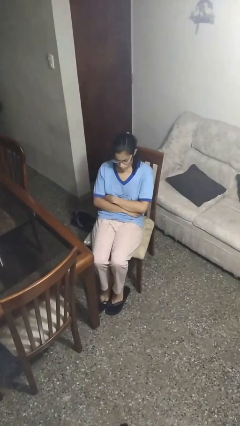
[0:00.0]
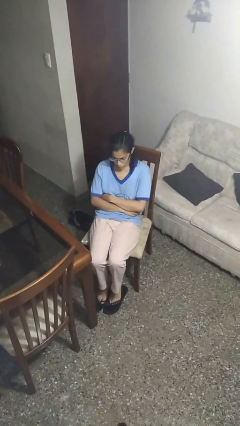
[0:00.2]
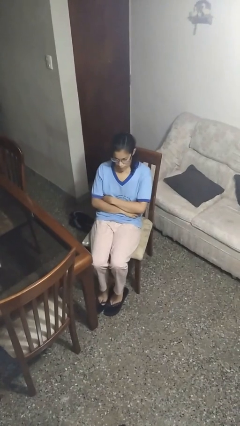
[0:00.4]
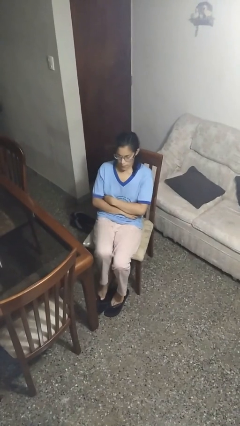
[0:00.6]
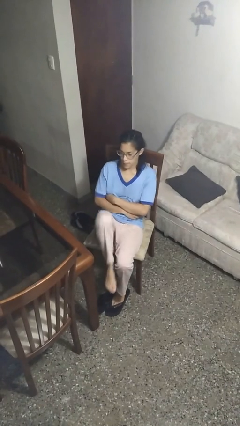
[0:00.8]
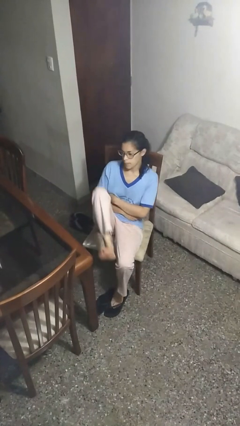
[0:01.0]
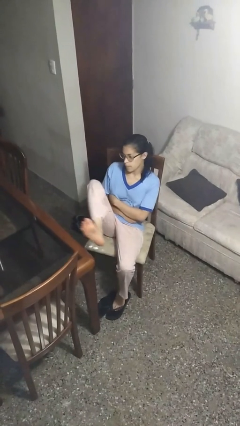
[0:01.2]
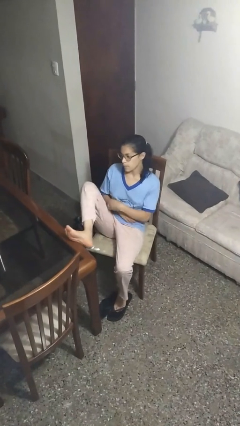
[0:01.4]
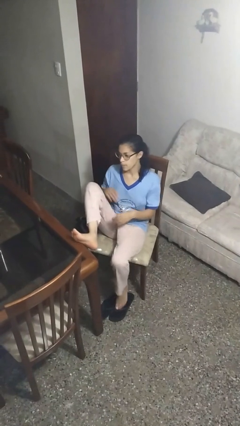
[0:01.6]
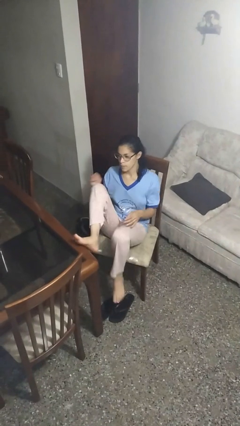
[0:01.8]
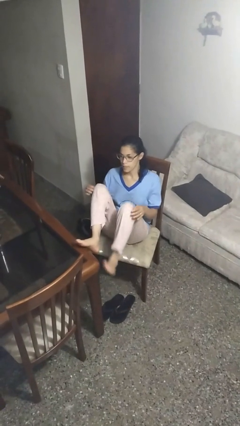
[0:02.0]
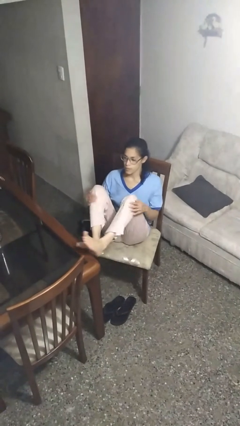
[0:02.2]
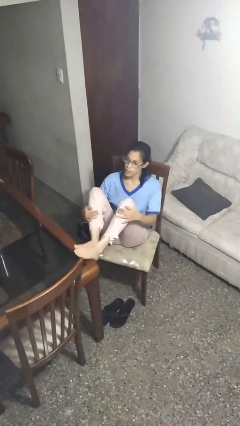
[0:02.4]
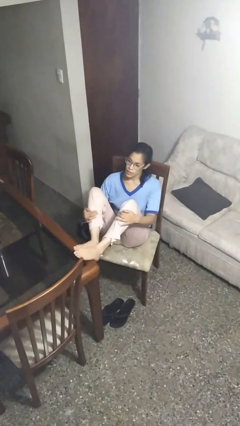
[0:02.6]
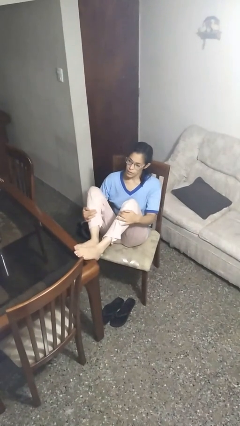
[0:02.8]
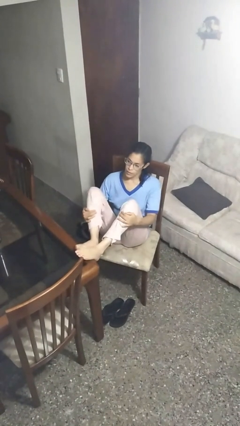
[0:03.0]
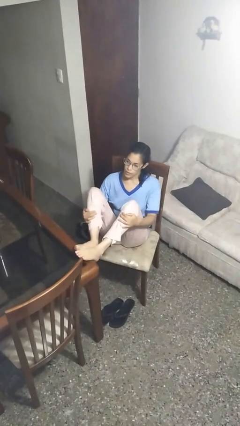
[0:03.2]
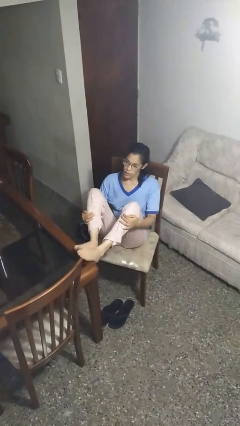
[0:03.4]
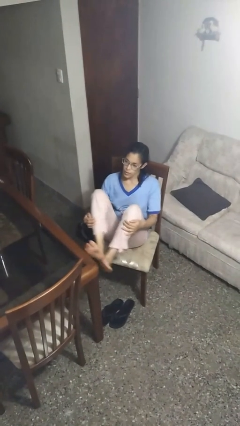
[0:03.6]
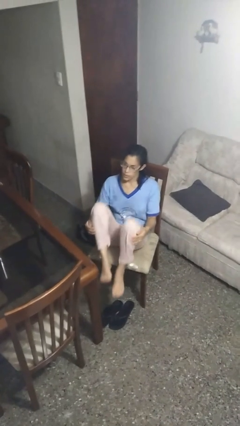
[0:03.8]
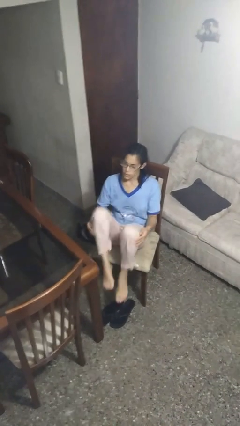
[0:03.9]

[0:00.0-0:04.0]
person puts feet up

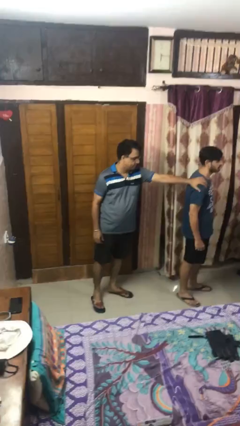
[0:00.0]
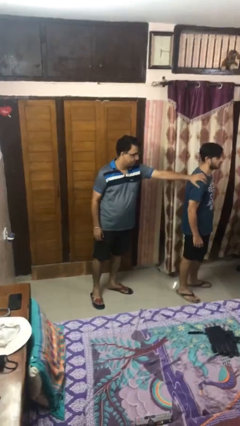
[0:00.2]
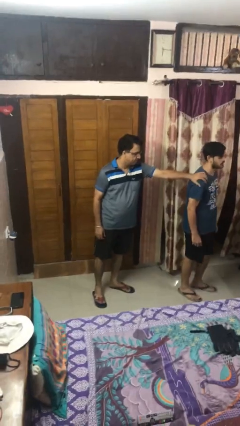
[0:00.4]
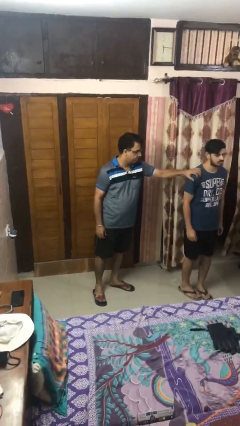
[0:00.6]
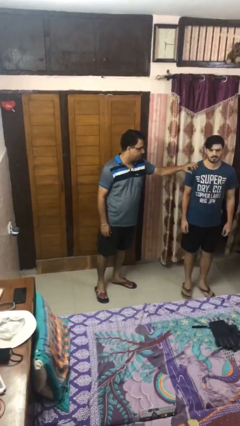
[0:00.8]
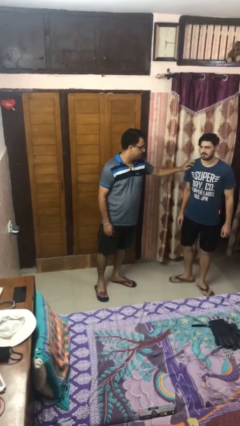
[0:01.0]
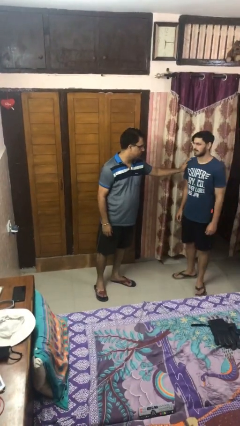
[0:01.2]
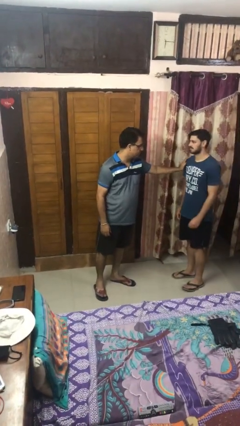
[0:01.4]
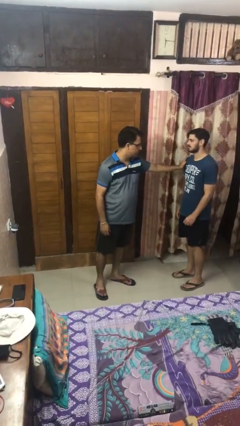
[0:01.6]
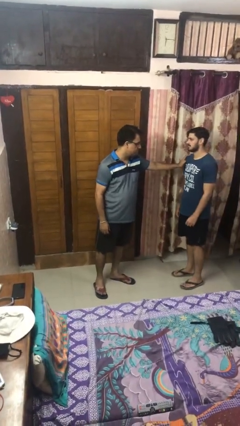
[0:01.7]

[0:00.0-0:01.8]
person spins person around

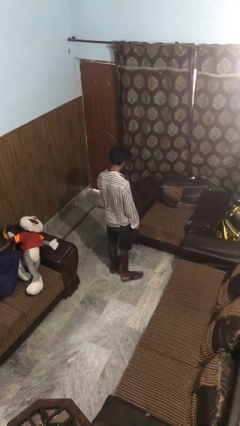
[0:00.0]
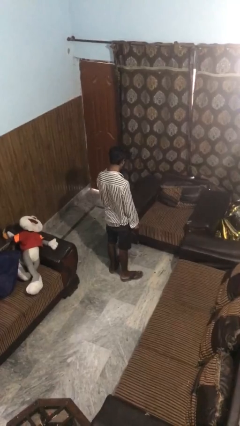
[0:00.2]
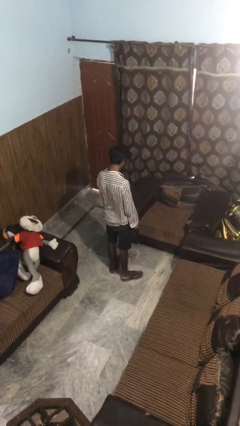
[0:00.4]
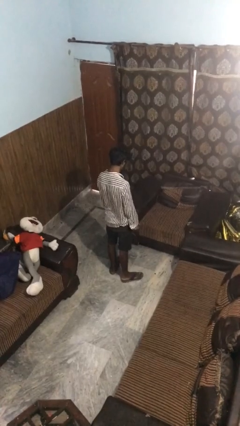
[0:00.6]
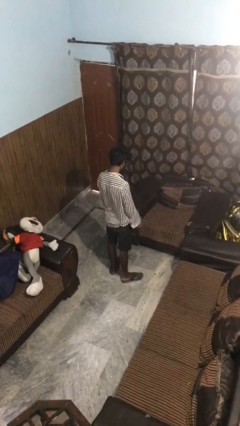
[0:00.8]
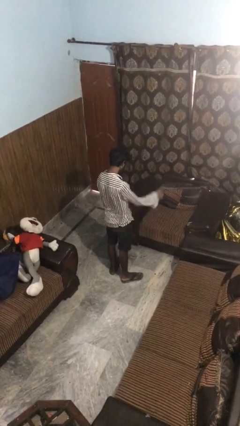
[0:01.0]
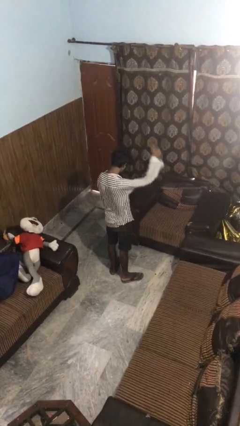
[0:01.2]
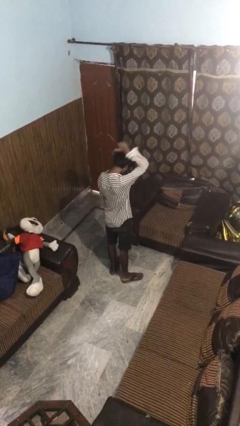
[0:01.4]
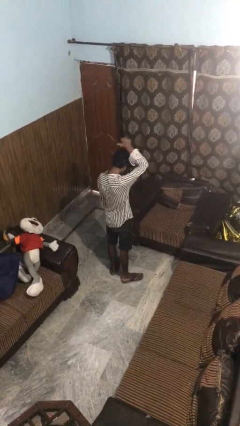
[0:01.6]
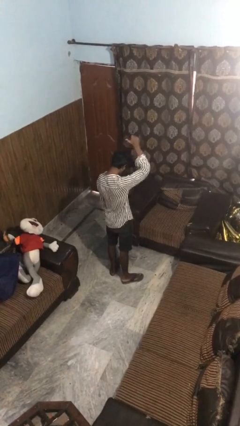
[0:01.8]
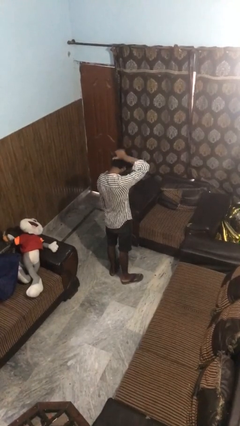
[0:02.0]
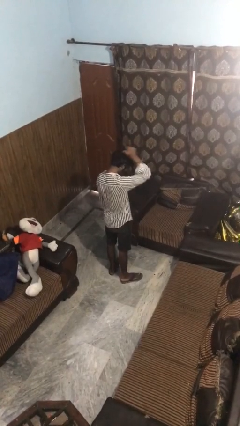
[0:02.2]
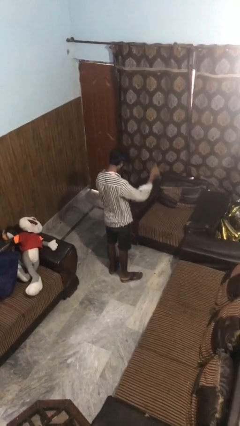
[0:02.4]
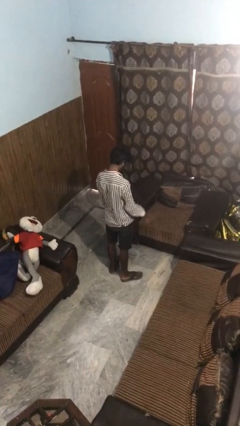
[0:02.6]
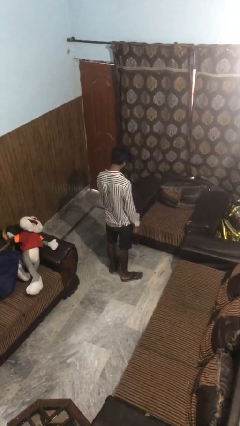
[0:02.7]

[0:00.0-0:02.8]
person gestures behind me

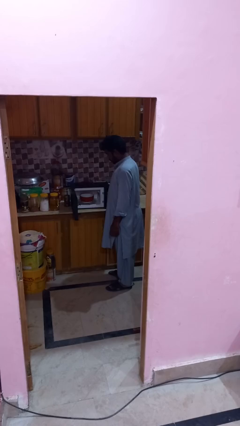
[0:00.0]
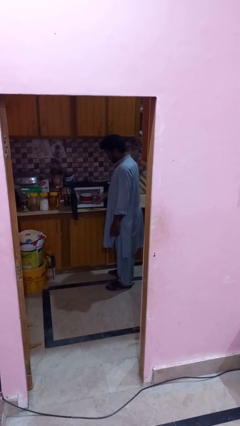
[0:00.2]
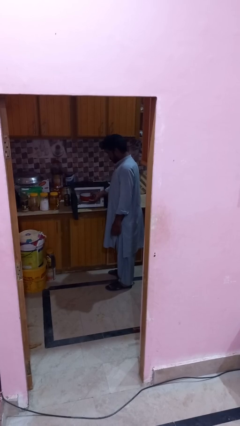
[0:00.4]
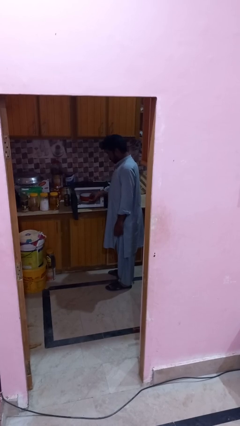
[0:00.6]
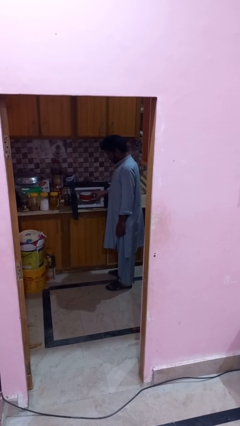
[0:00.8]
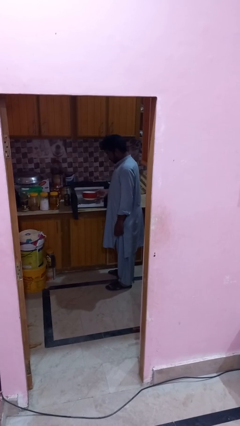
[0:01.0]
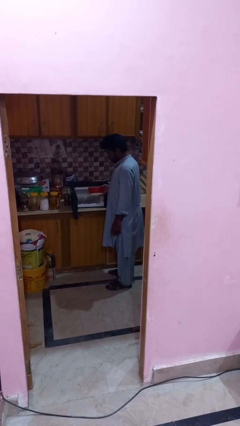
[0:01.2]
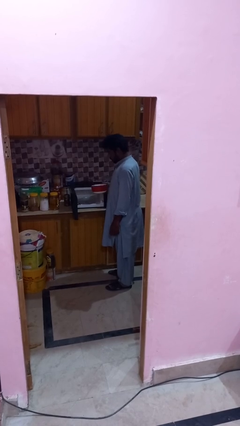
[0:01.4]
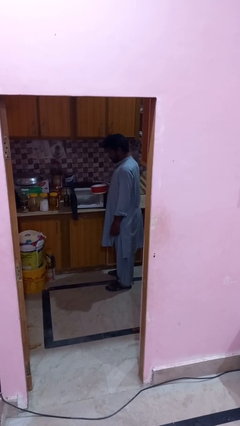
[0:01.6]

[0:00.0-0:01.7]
person takes object from microwave

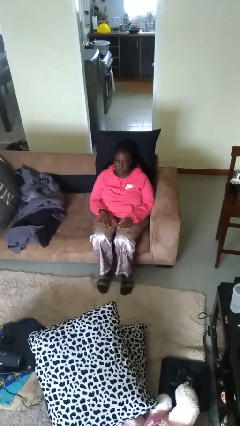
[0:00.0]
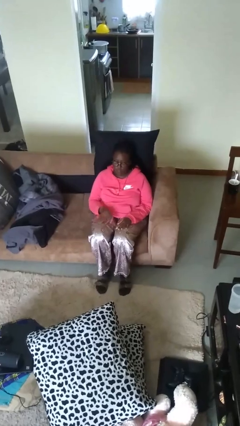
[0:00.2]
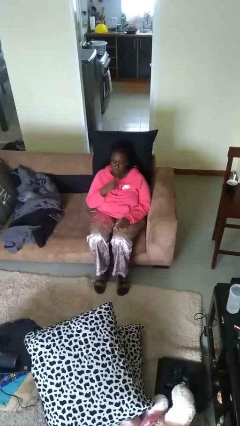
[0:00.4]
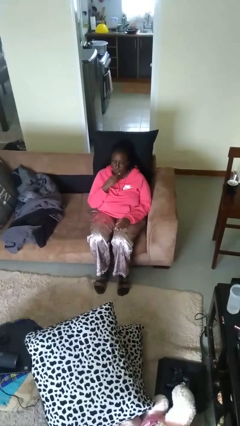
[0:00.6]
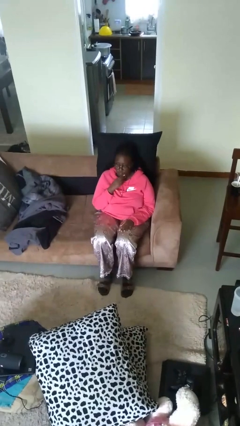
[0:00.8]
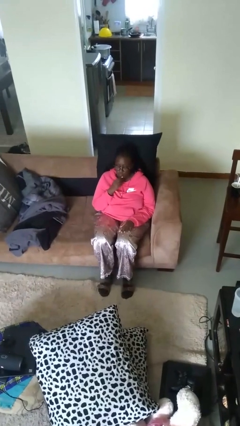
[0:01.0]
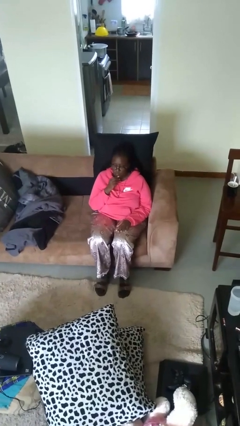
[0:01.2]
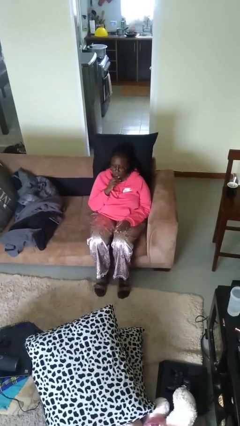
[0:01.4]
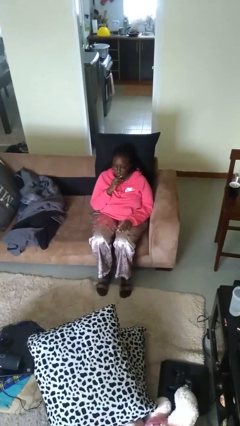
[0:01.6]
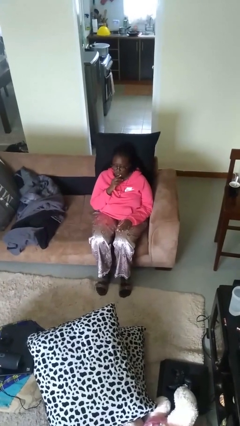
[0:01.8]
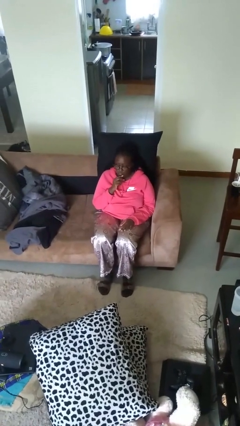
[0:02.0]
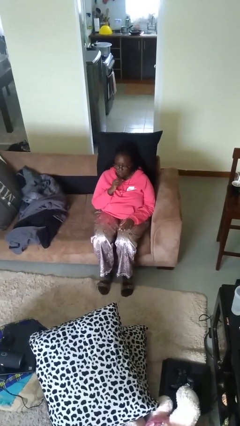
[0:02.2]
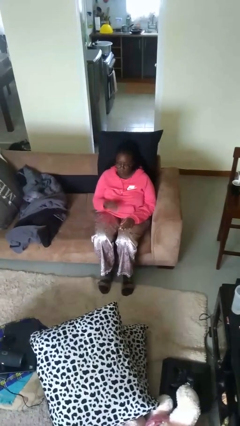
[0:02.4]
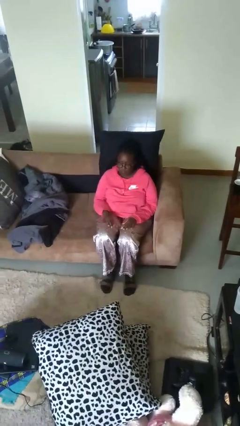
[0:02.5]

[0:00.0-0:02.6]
person strokes chin

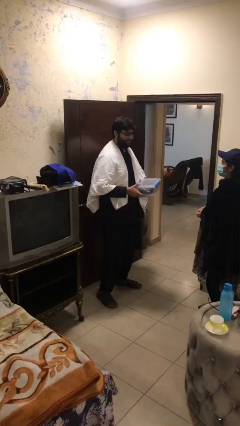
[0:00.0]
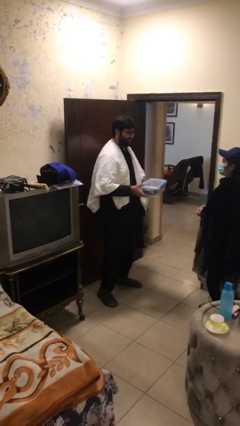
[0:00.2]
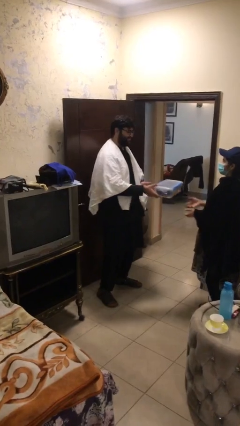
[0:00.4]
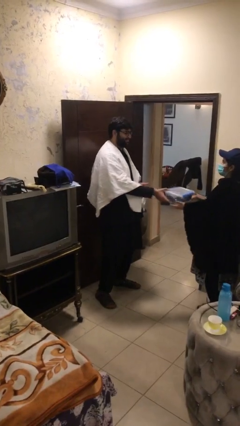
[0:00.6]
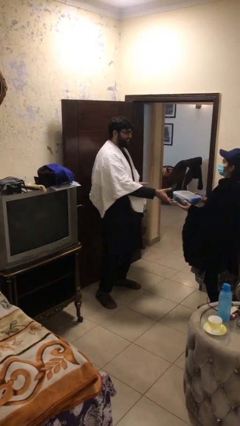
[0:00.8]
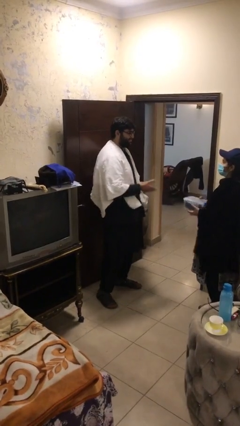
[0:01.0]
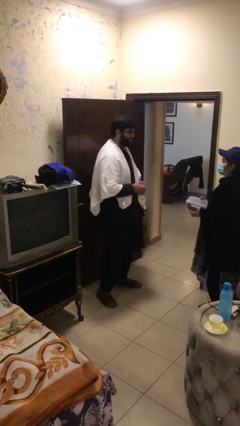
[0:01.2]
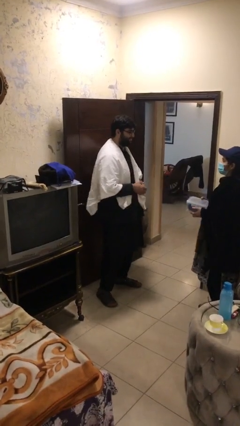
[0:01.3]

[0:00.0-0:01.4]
person transfers object to person

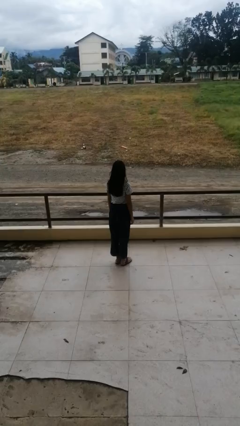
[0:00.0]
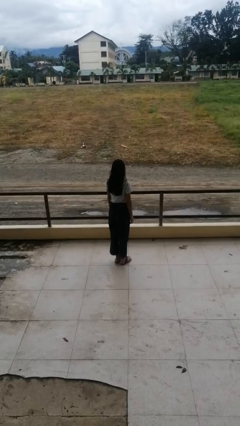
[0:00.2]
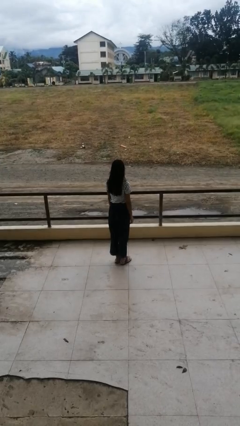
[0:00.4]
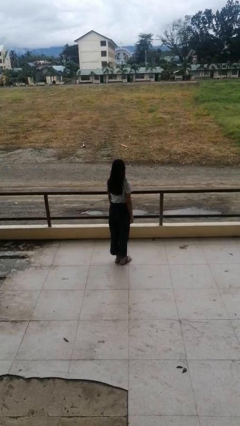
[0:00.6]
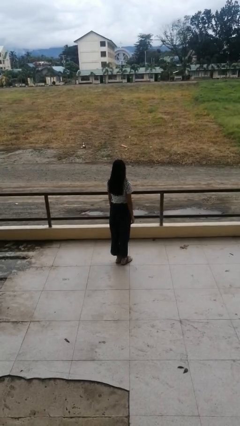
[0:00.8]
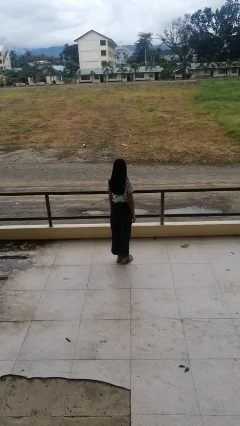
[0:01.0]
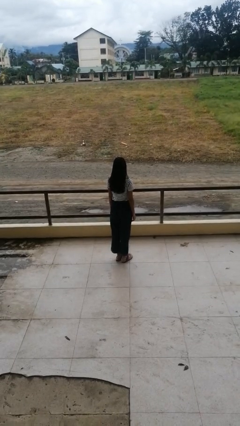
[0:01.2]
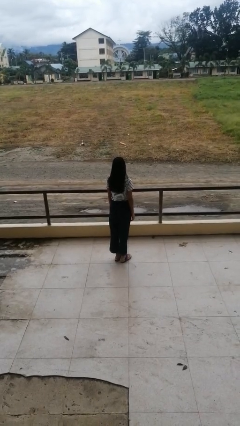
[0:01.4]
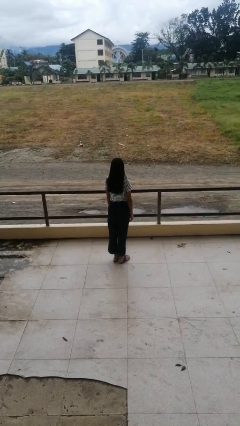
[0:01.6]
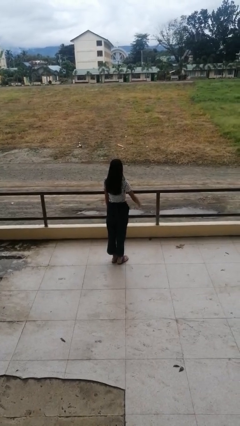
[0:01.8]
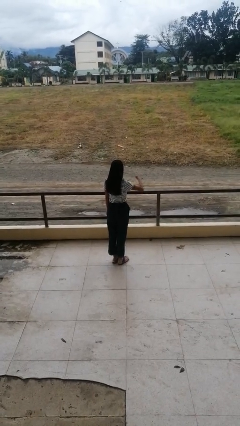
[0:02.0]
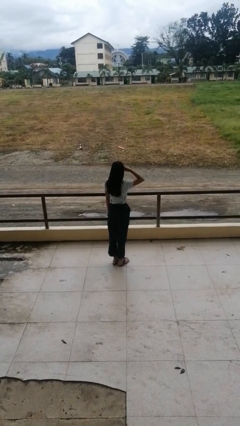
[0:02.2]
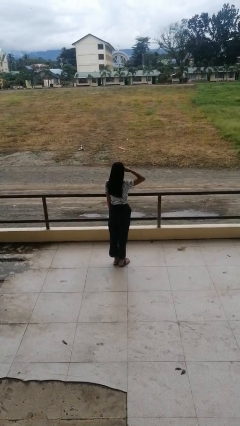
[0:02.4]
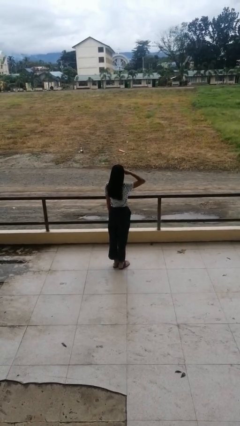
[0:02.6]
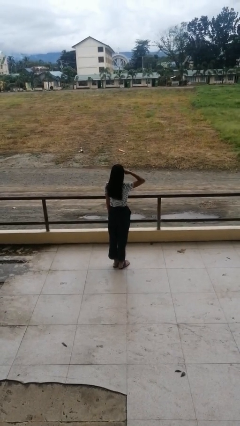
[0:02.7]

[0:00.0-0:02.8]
person salutes
